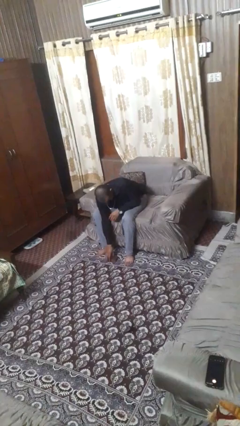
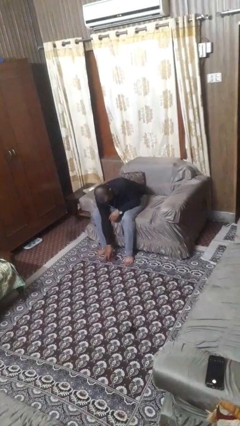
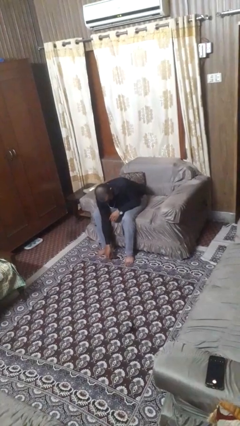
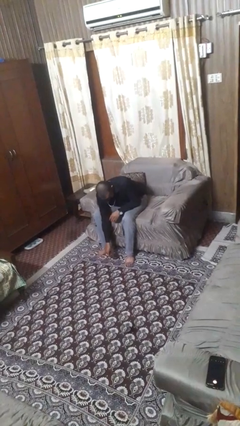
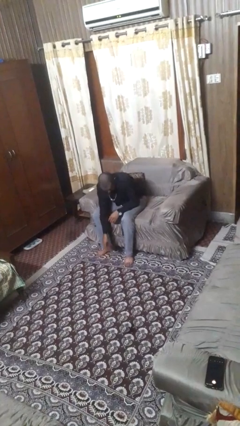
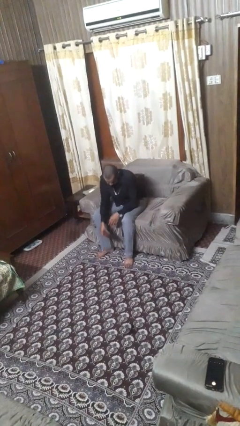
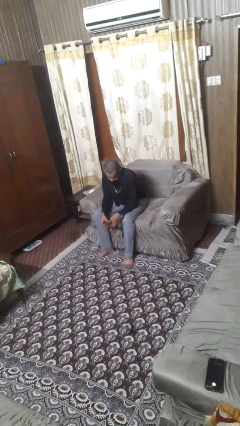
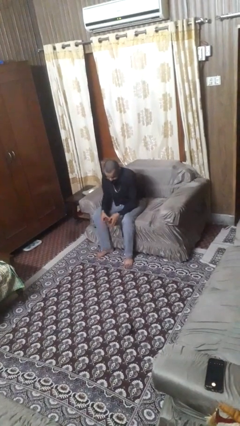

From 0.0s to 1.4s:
person picks up object from floor

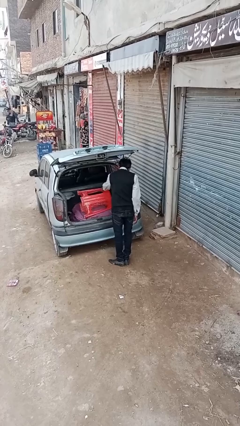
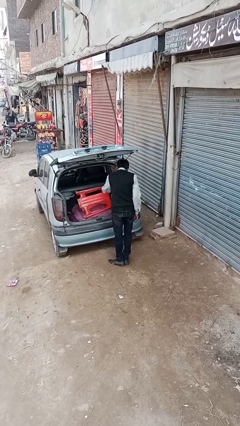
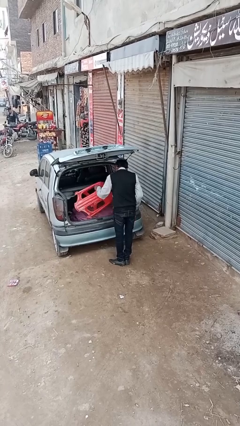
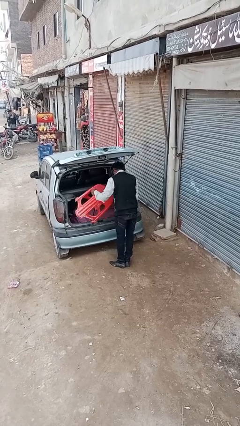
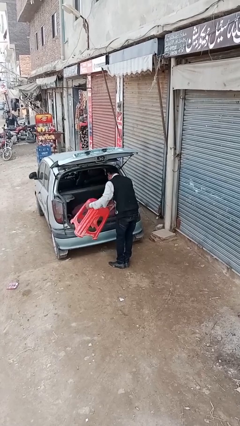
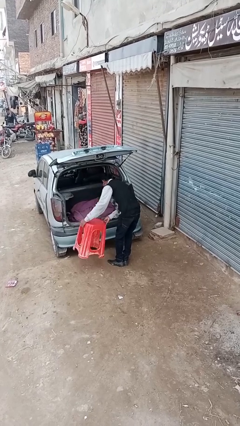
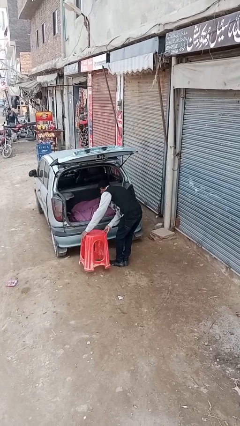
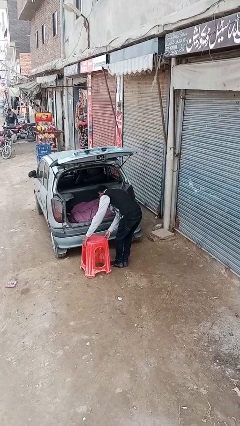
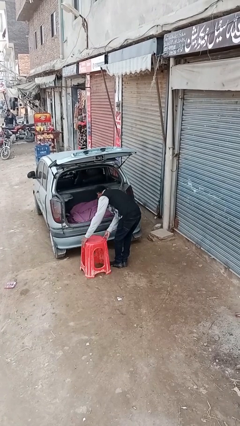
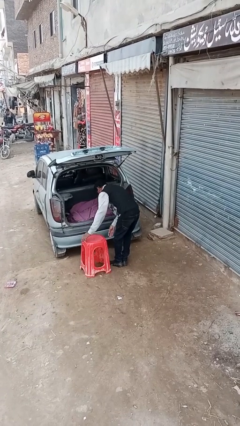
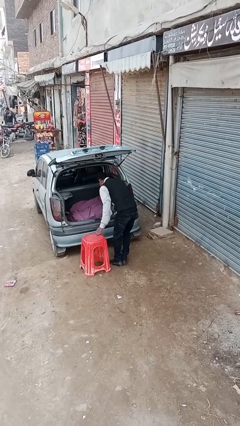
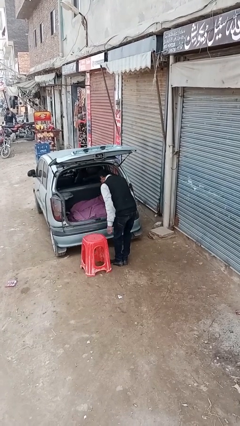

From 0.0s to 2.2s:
person unloads car

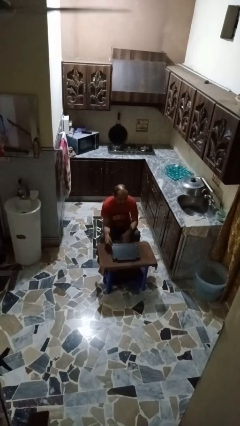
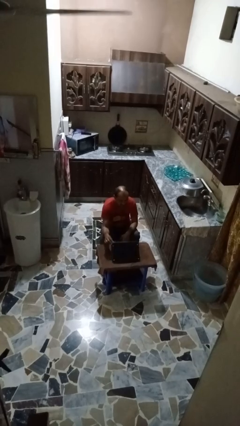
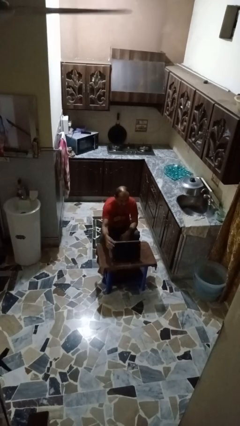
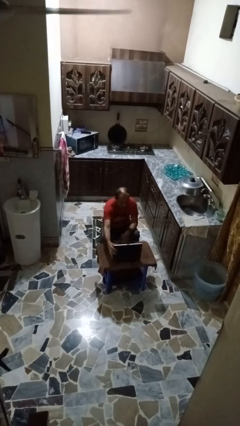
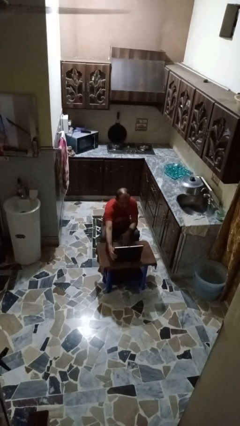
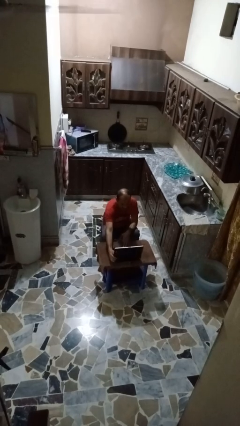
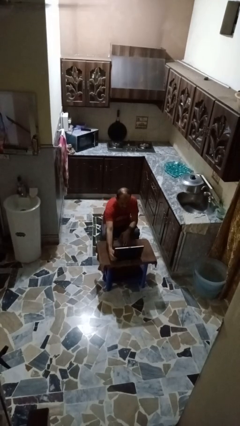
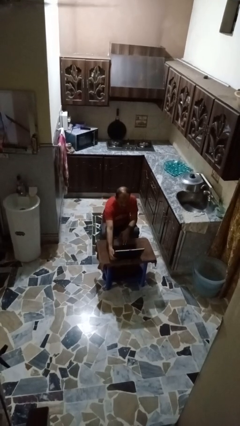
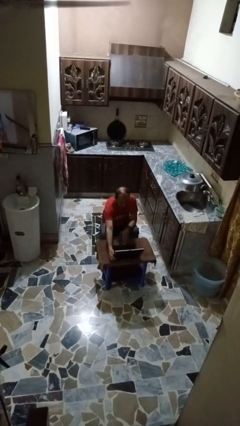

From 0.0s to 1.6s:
person opens laptop

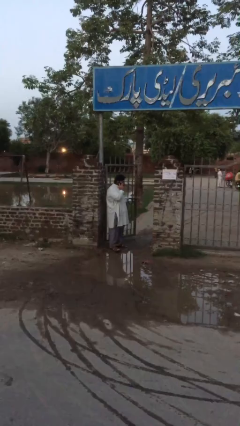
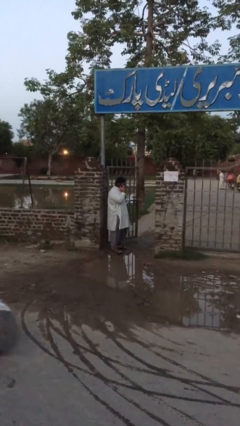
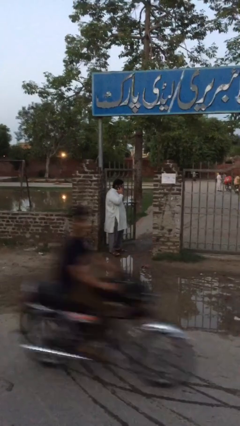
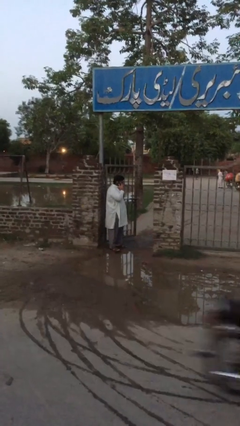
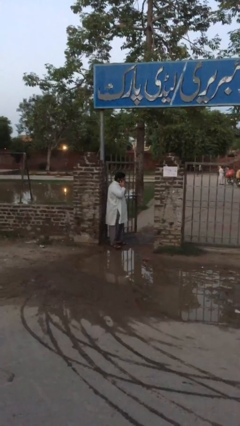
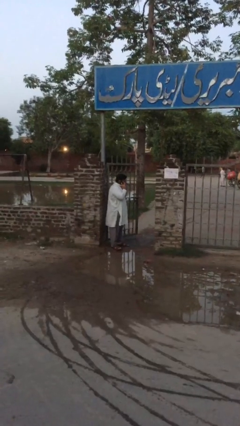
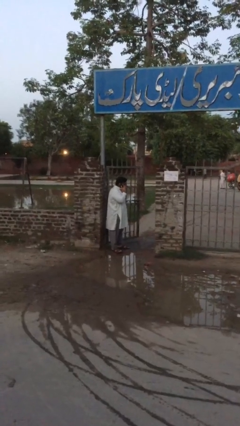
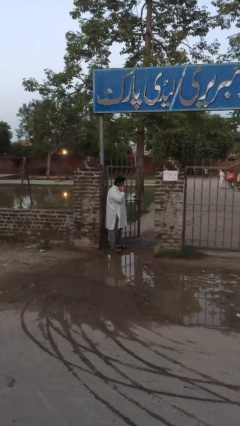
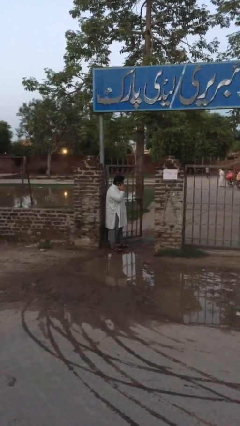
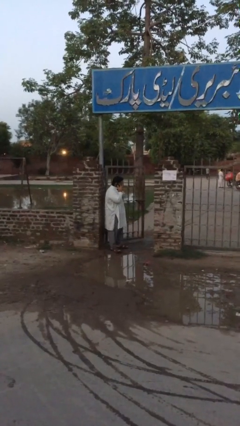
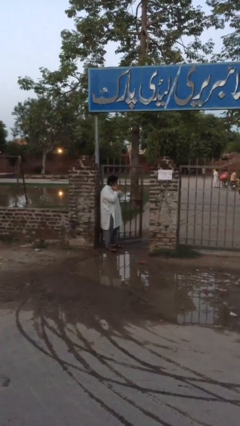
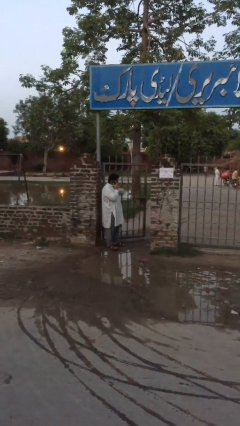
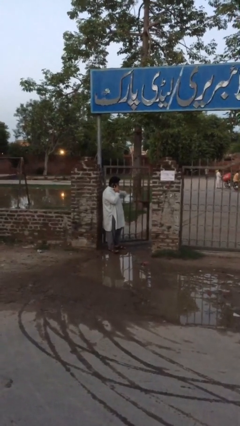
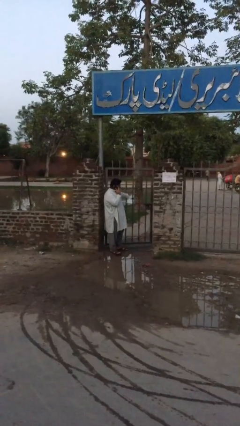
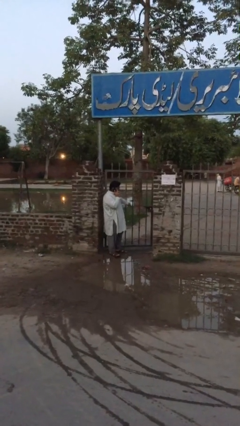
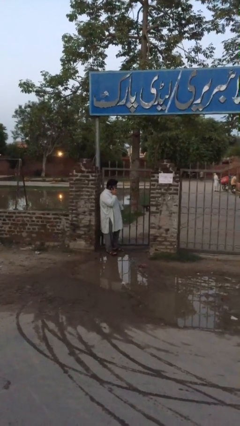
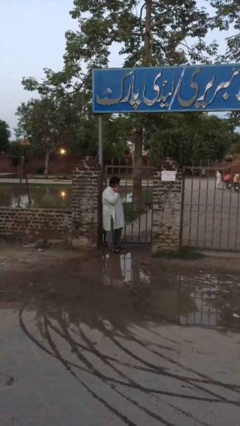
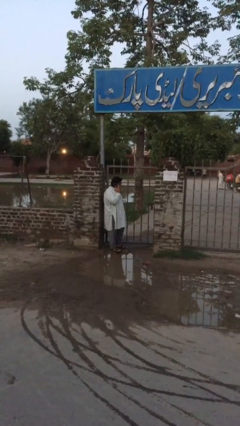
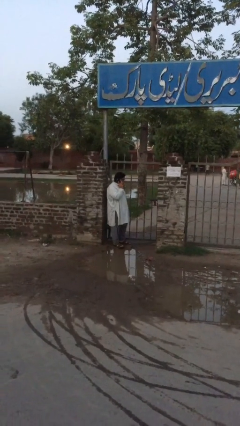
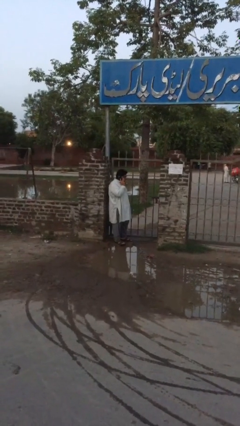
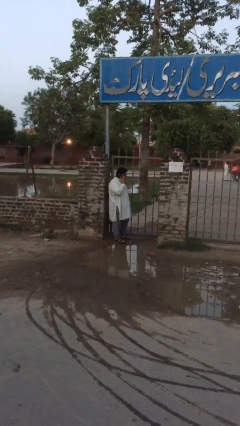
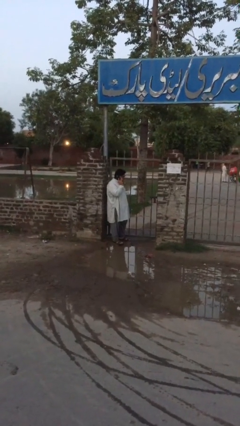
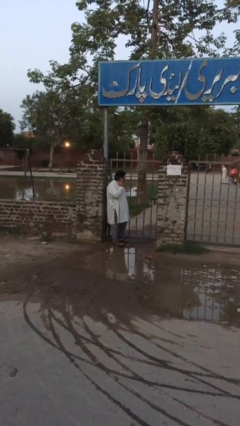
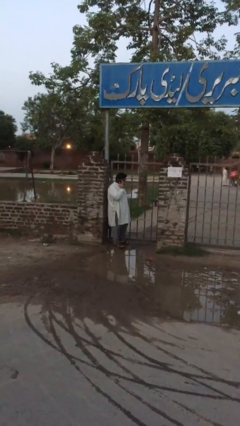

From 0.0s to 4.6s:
person closes facility door

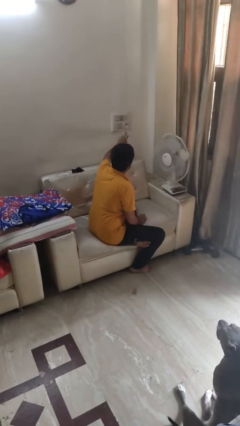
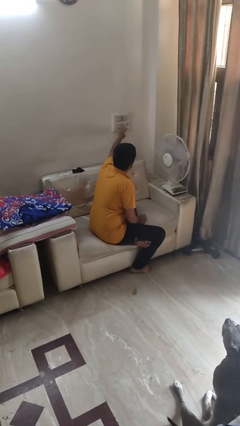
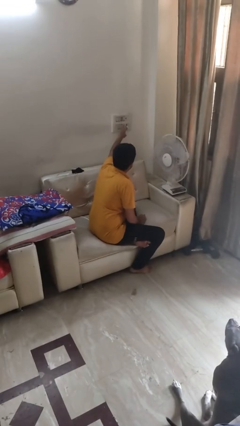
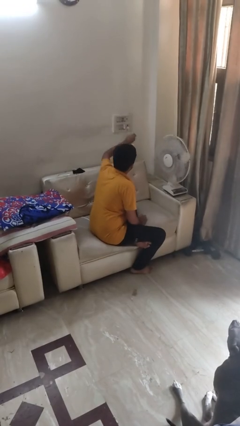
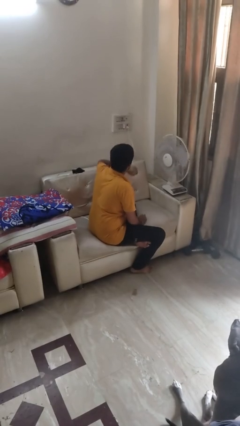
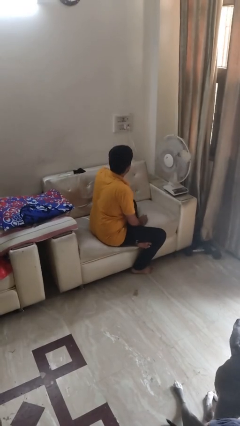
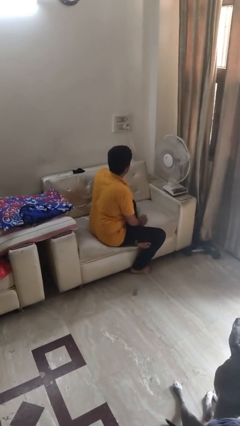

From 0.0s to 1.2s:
person turns off fan

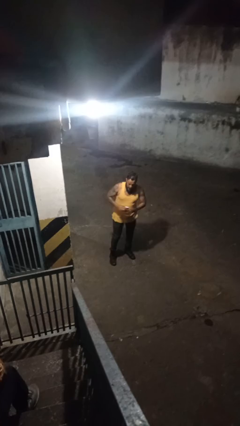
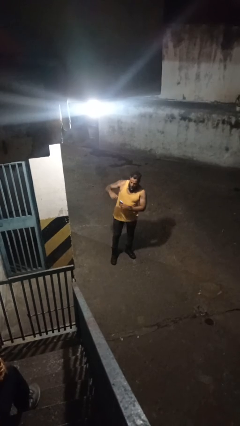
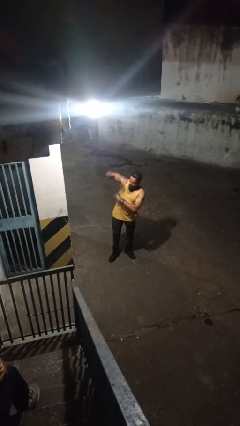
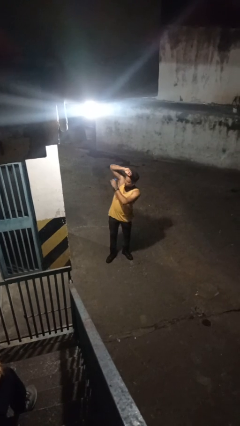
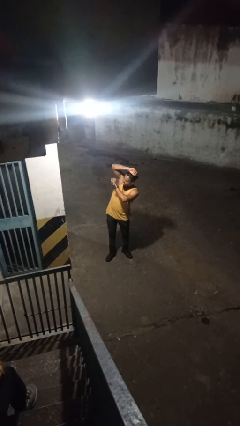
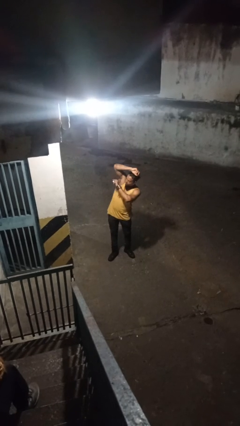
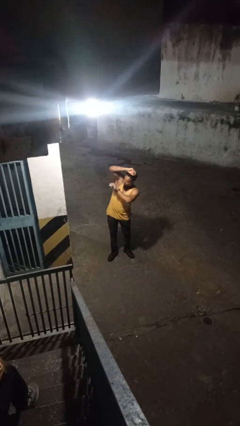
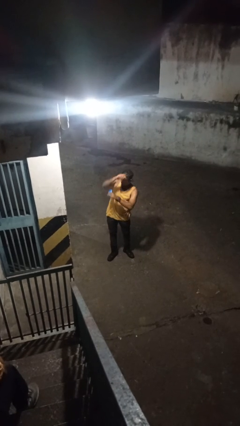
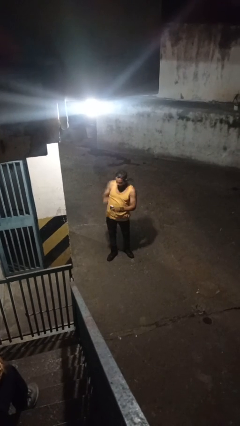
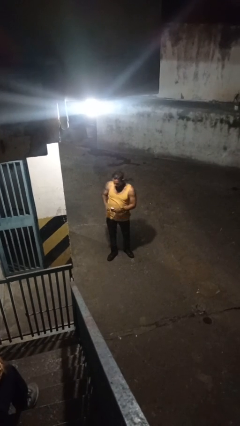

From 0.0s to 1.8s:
person applies deodorant

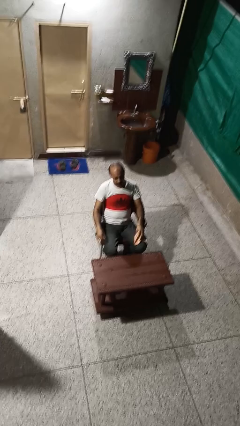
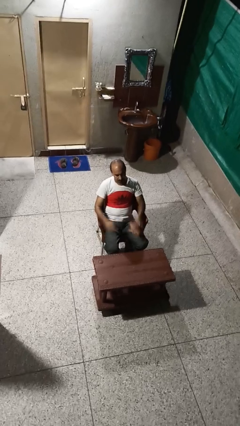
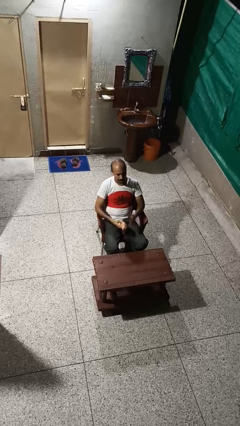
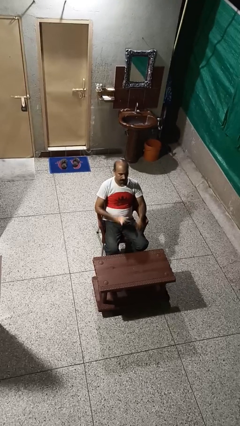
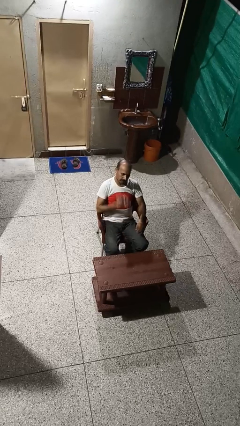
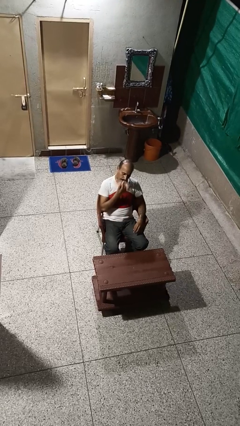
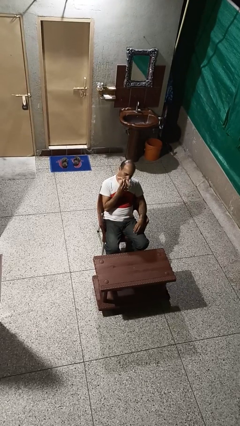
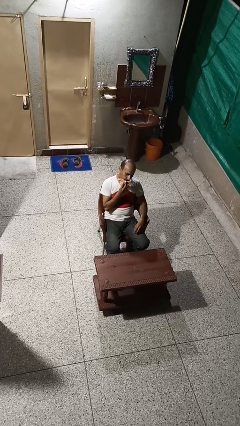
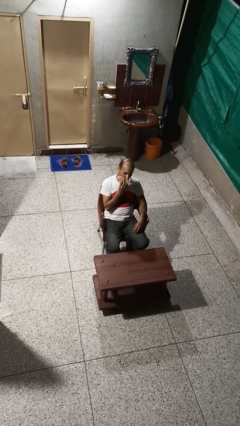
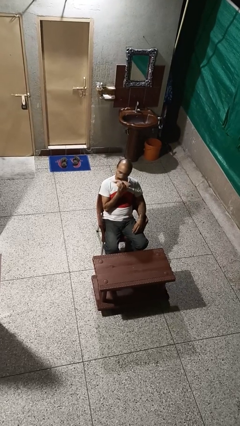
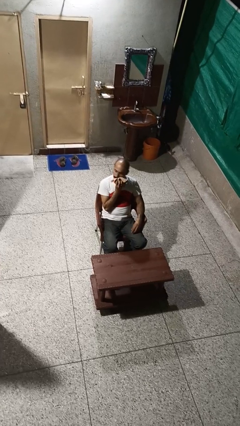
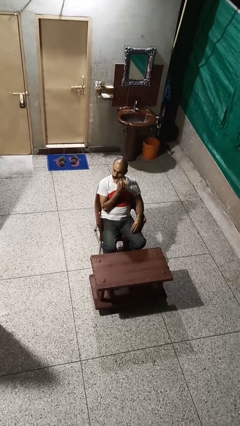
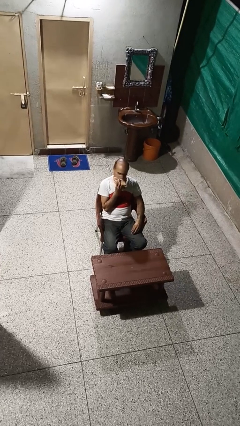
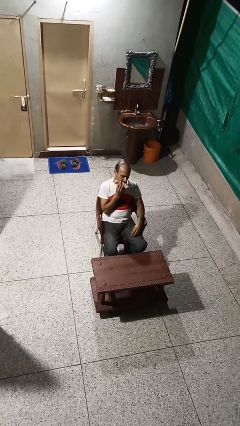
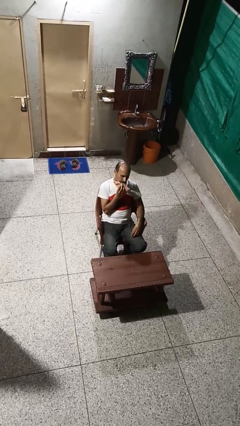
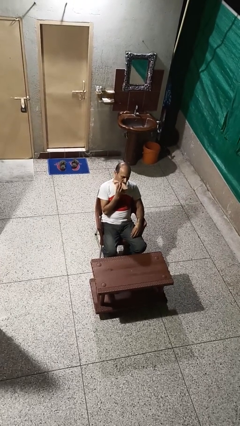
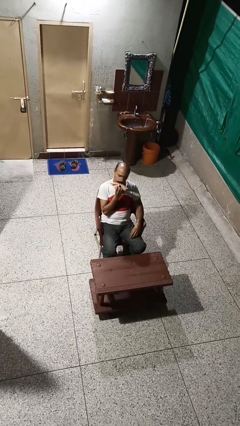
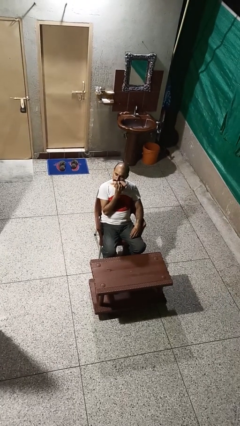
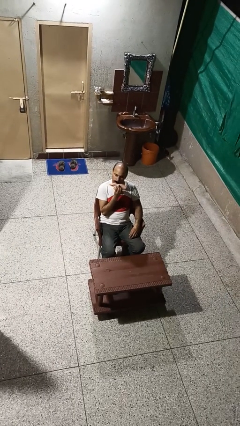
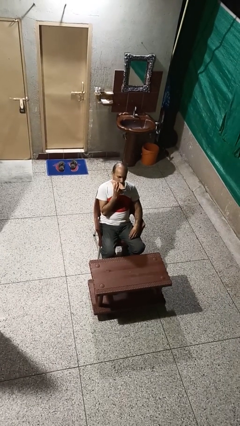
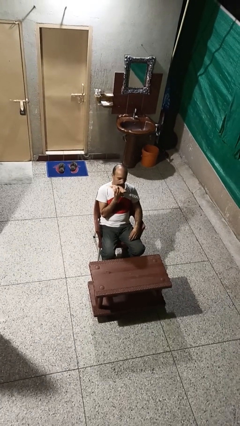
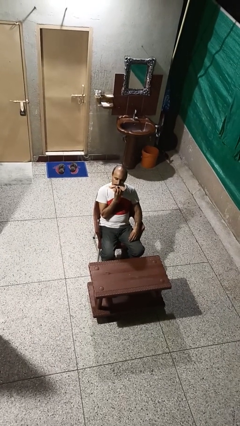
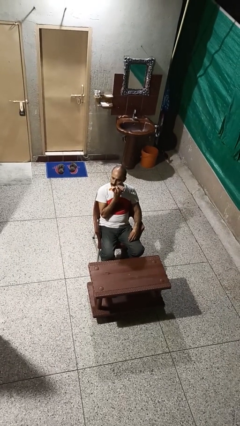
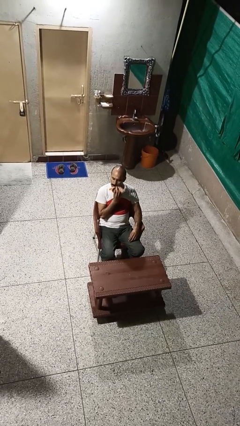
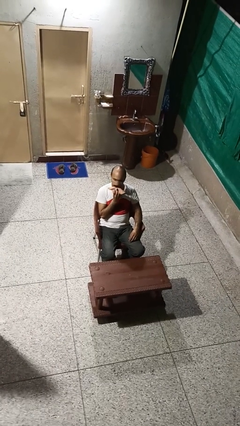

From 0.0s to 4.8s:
person wipes mouth with napkin

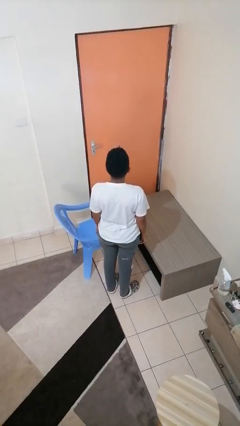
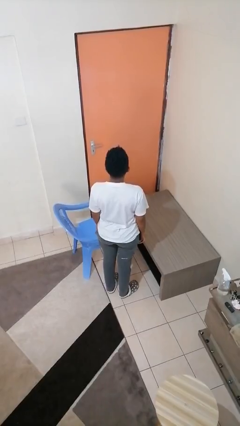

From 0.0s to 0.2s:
person pulls out chair
